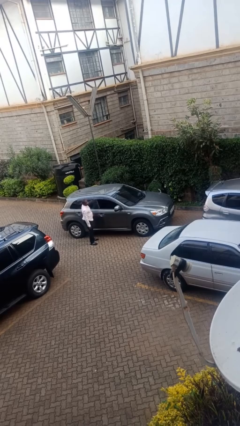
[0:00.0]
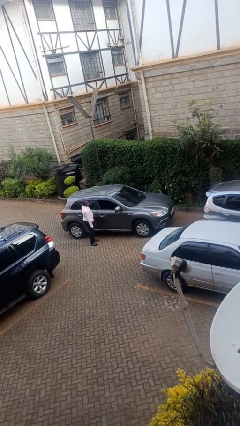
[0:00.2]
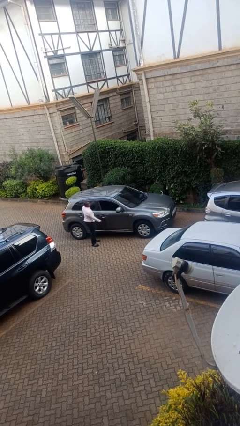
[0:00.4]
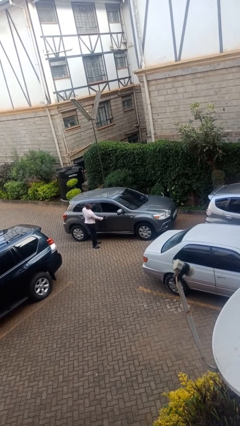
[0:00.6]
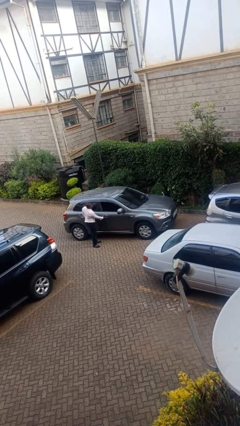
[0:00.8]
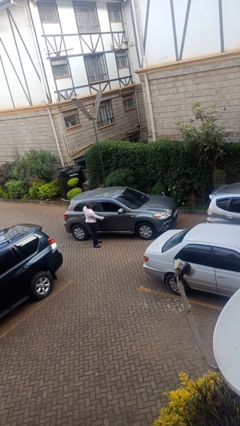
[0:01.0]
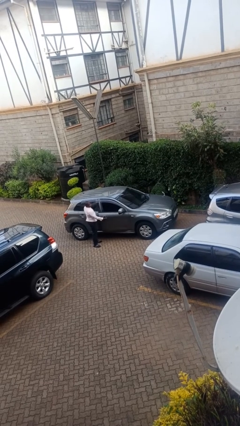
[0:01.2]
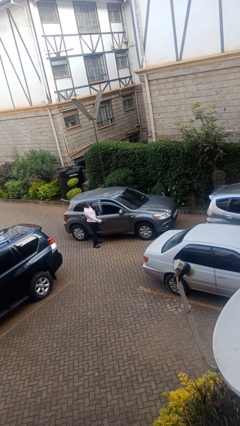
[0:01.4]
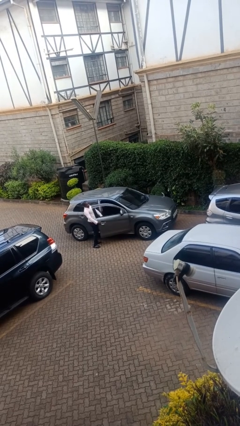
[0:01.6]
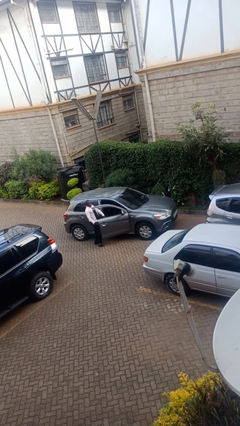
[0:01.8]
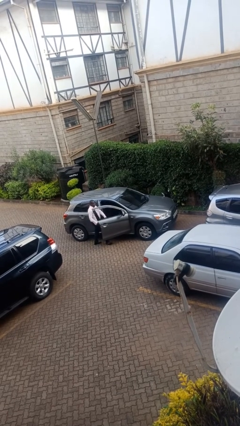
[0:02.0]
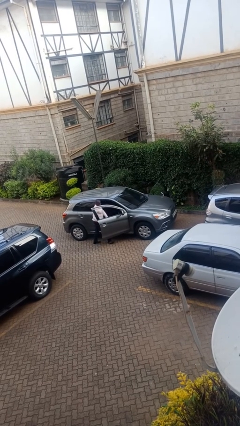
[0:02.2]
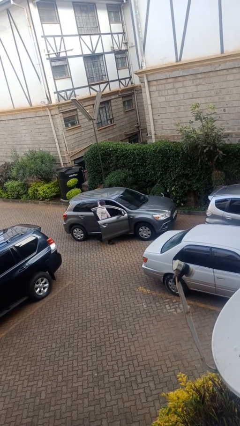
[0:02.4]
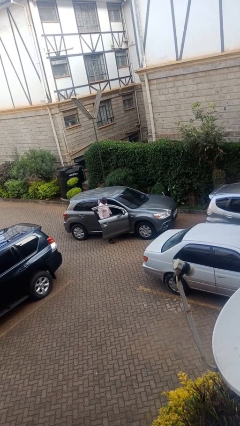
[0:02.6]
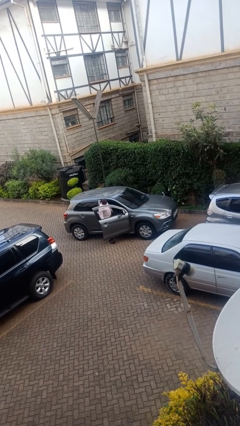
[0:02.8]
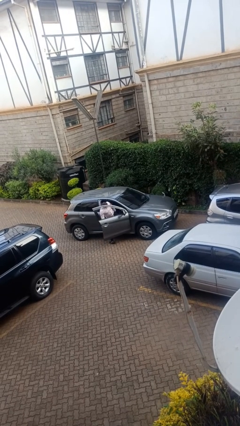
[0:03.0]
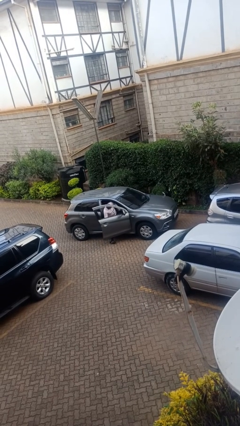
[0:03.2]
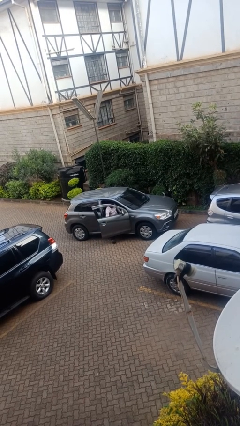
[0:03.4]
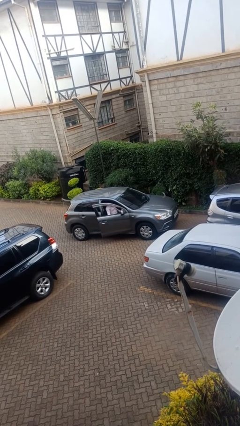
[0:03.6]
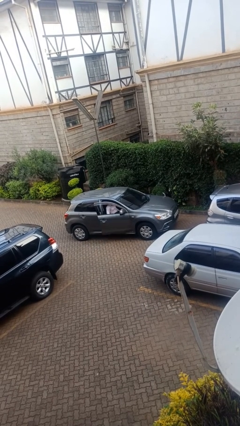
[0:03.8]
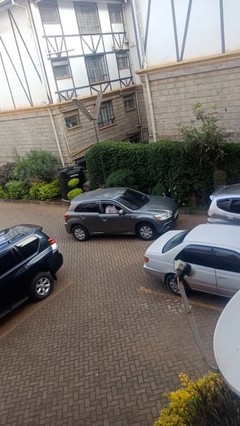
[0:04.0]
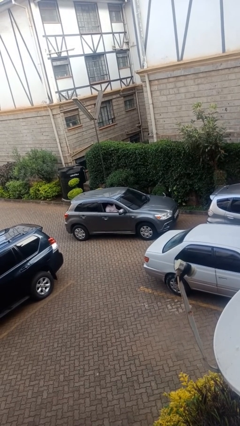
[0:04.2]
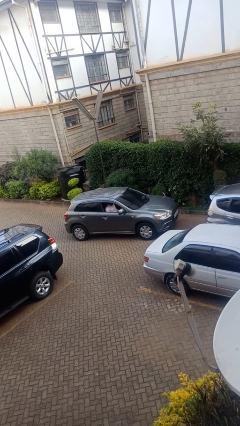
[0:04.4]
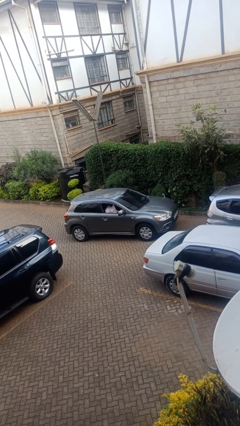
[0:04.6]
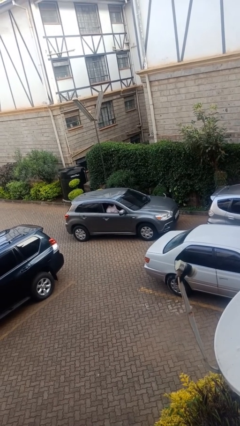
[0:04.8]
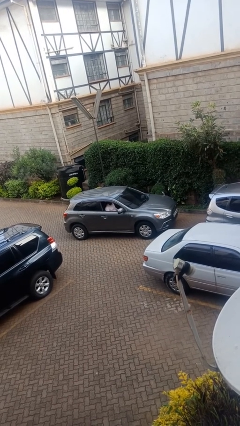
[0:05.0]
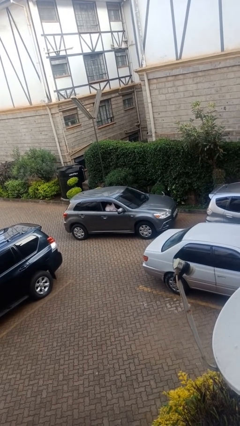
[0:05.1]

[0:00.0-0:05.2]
car picks up person

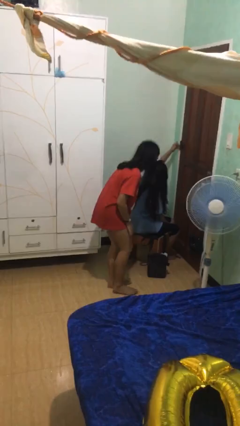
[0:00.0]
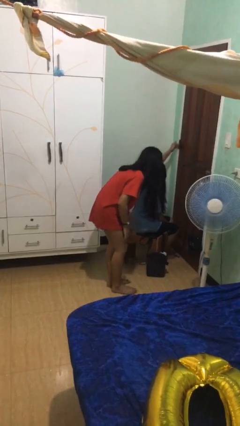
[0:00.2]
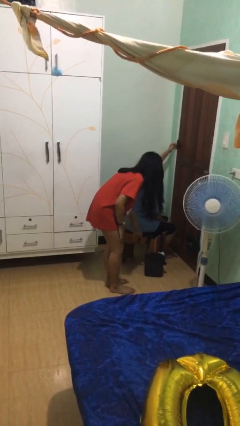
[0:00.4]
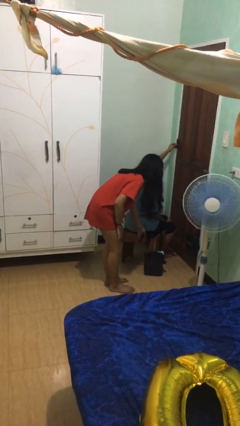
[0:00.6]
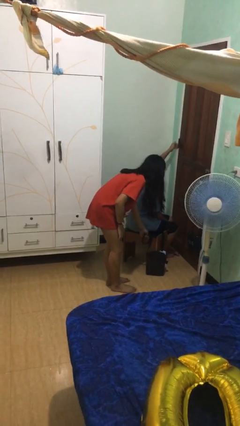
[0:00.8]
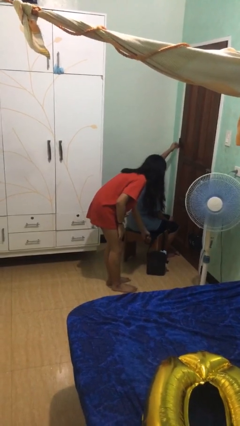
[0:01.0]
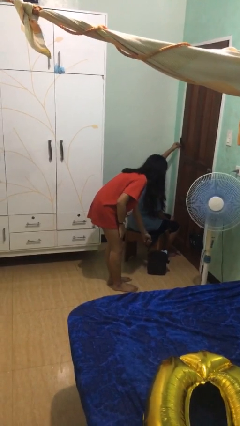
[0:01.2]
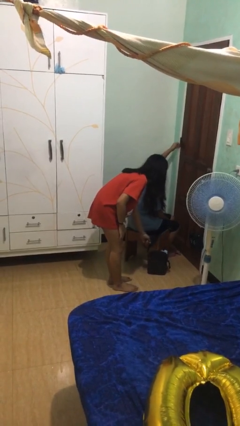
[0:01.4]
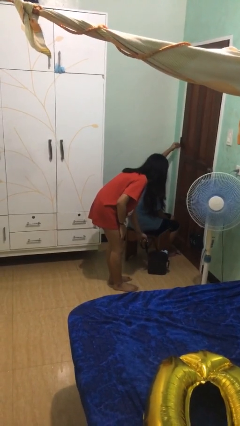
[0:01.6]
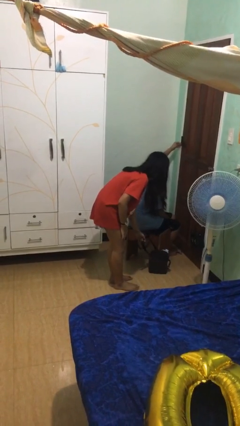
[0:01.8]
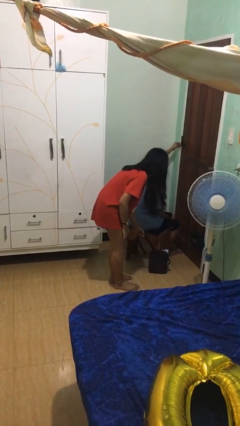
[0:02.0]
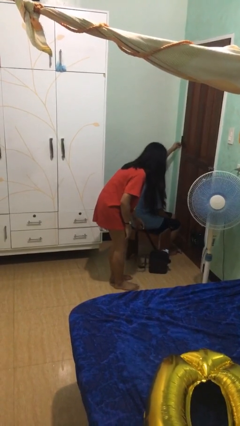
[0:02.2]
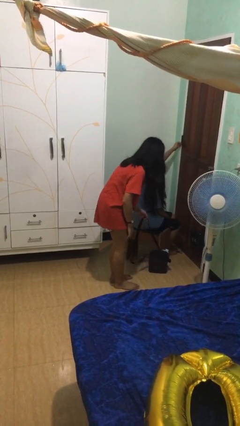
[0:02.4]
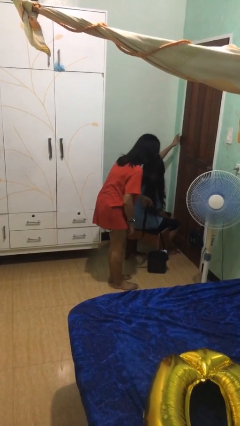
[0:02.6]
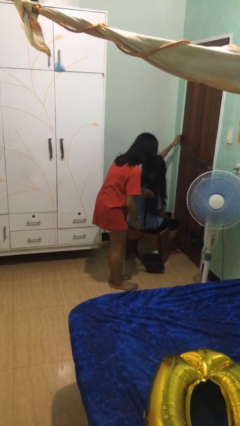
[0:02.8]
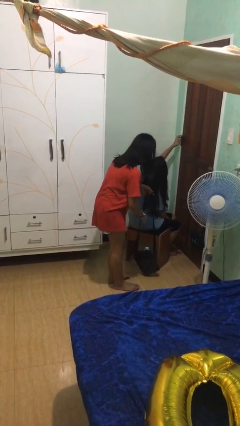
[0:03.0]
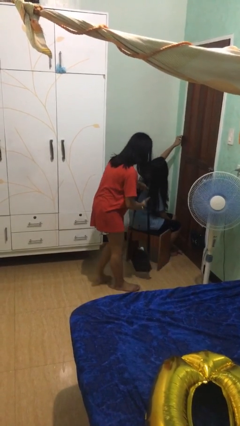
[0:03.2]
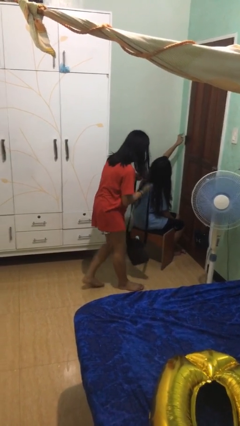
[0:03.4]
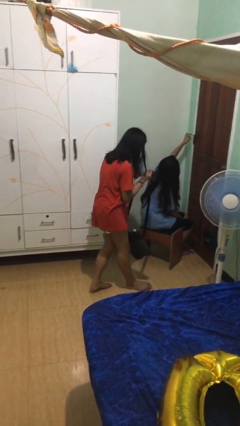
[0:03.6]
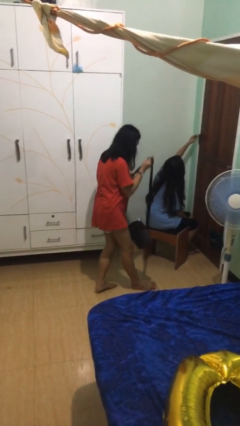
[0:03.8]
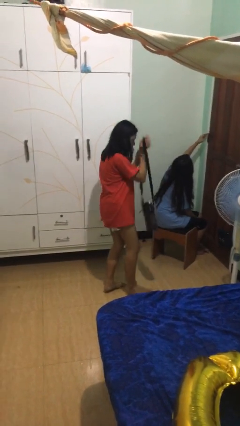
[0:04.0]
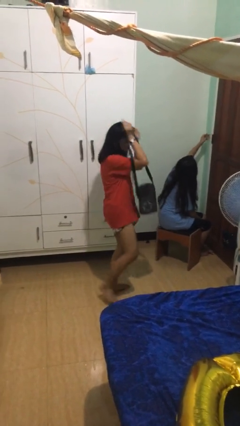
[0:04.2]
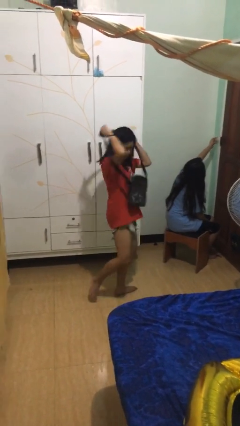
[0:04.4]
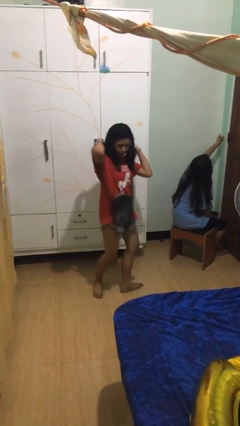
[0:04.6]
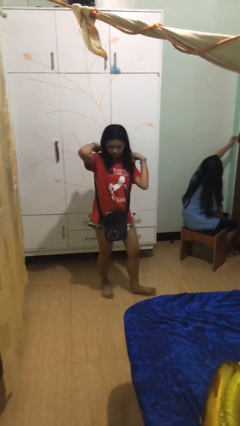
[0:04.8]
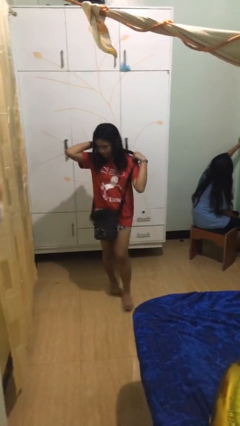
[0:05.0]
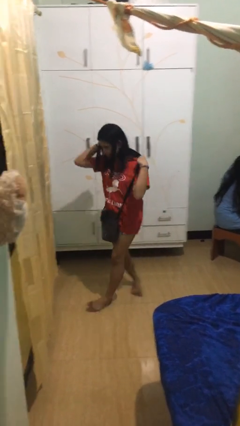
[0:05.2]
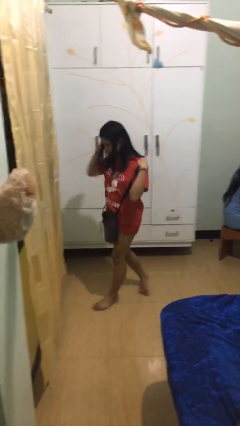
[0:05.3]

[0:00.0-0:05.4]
person steals object from person

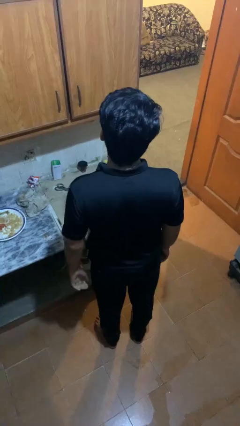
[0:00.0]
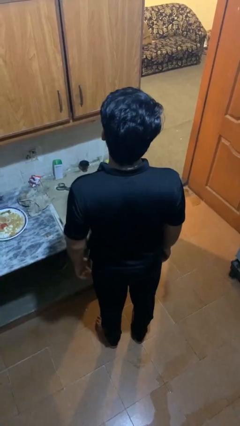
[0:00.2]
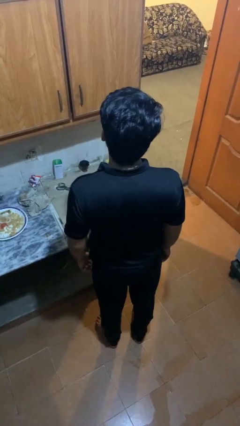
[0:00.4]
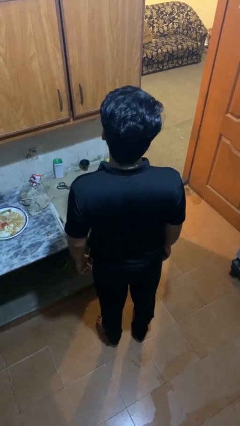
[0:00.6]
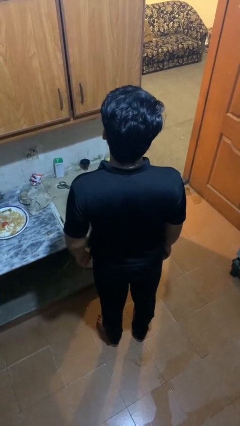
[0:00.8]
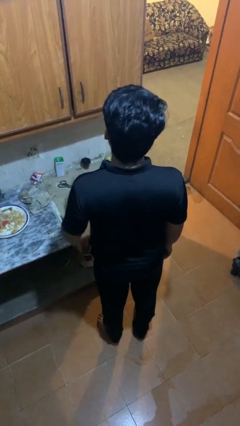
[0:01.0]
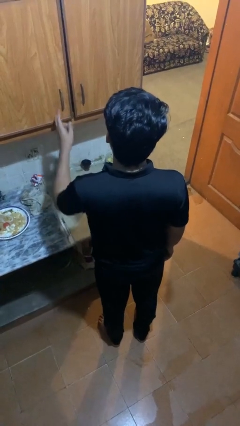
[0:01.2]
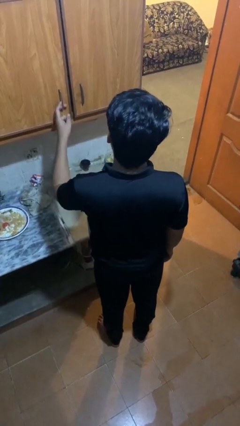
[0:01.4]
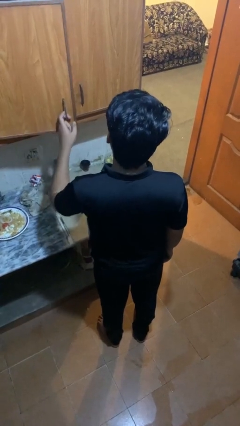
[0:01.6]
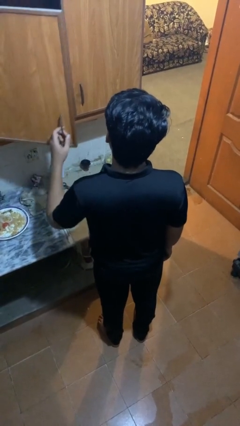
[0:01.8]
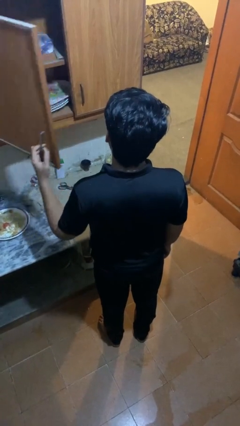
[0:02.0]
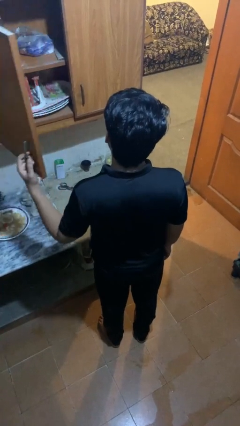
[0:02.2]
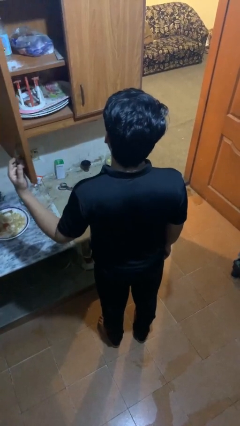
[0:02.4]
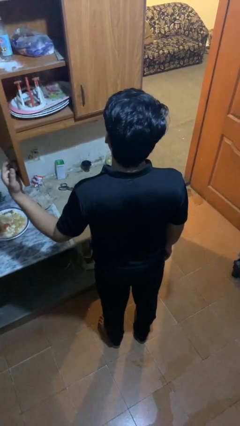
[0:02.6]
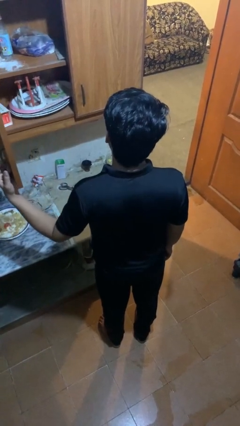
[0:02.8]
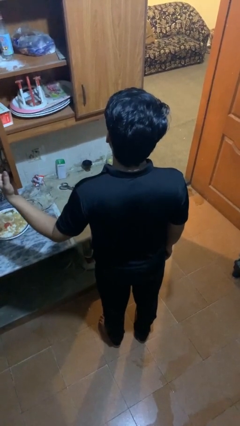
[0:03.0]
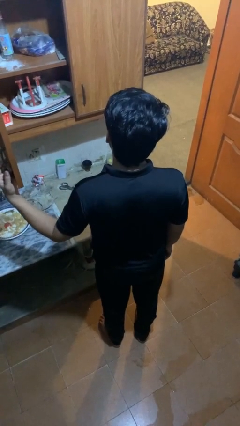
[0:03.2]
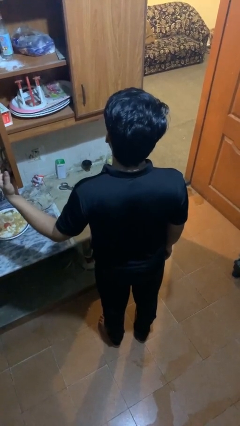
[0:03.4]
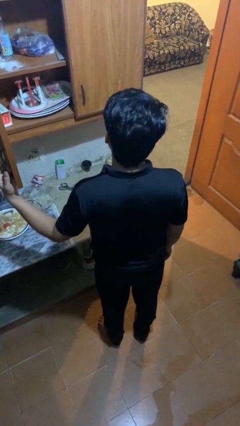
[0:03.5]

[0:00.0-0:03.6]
person opens cabinet

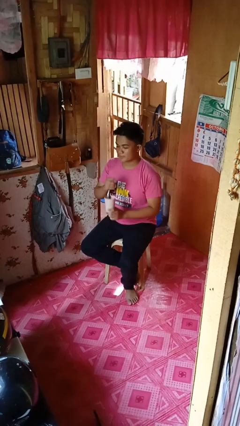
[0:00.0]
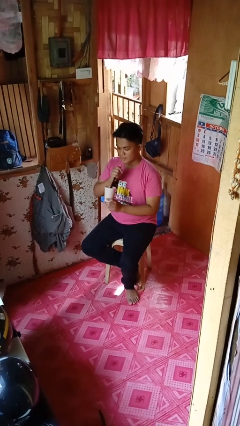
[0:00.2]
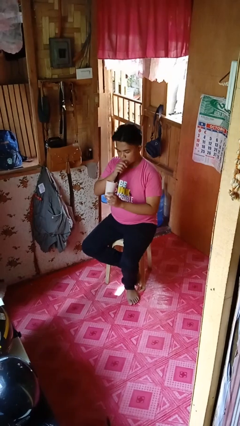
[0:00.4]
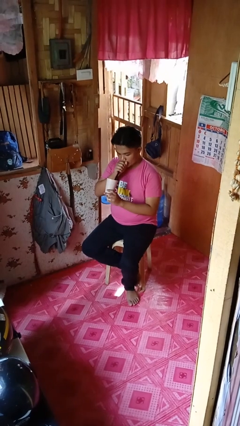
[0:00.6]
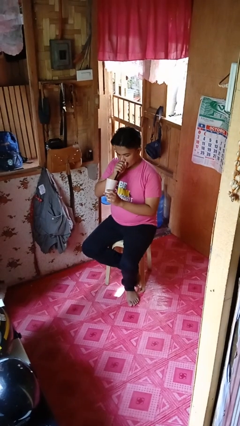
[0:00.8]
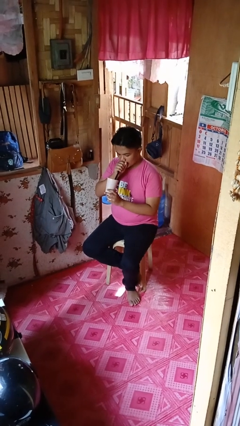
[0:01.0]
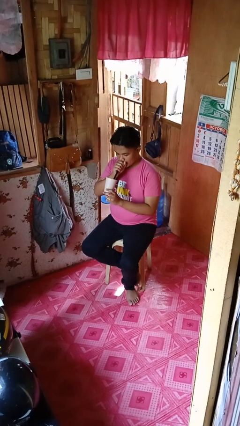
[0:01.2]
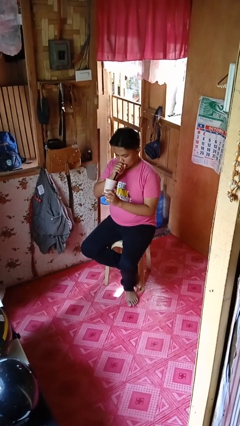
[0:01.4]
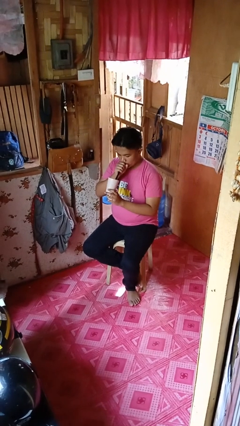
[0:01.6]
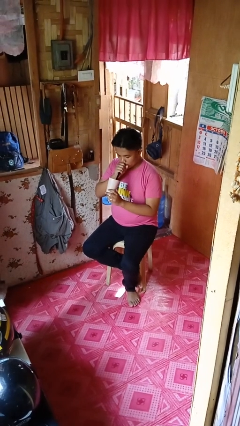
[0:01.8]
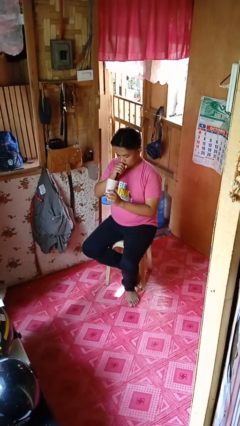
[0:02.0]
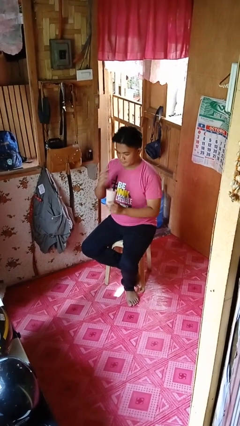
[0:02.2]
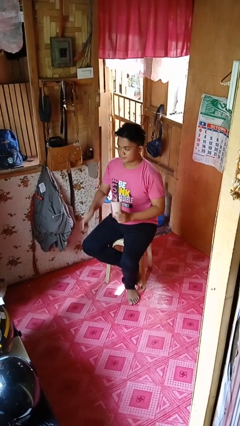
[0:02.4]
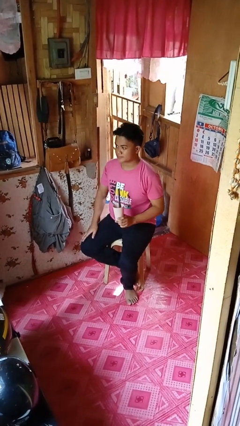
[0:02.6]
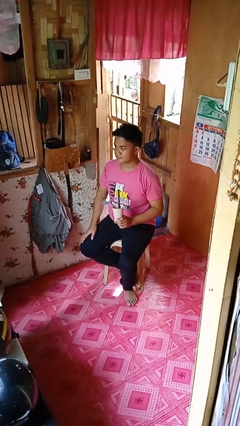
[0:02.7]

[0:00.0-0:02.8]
person drinks from straw

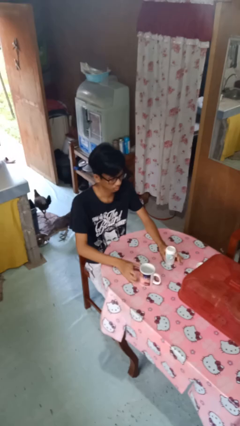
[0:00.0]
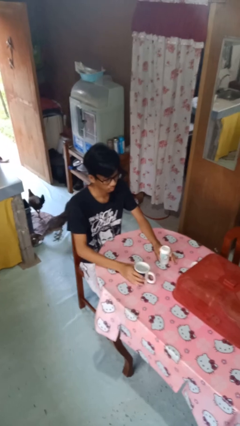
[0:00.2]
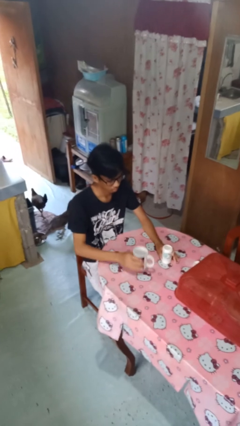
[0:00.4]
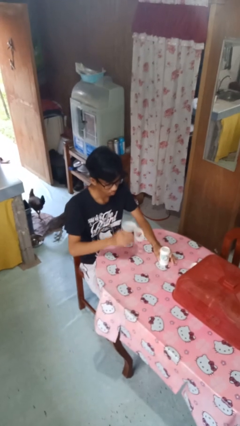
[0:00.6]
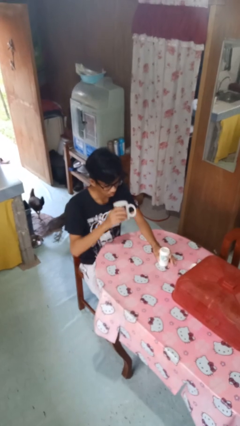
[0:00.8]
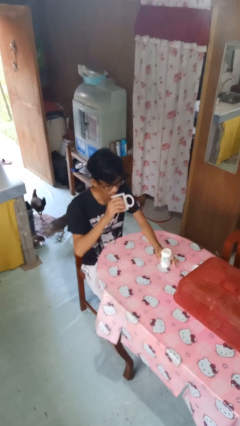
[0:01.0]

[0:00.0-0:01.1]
person drinks from cup
